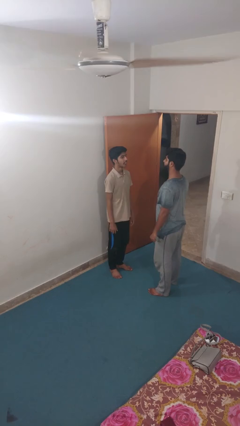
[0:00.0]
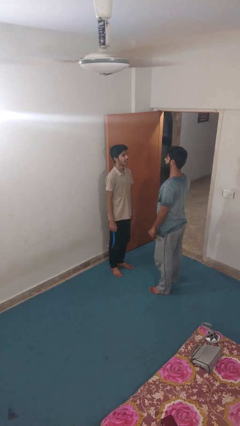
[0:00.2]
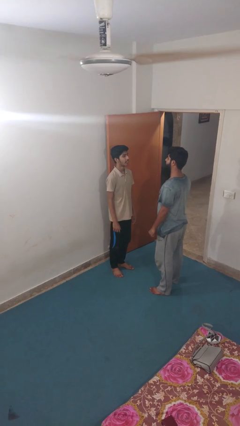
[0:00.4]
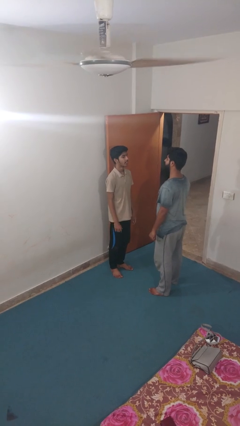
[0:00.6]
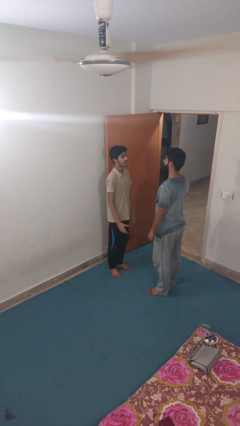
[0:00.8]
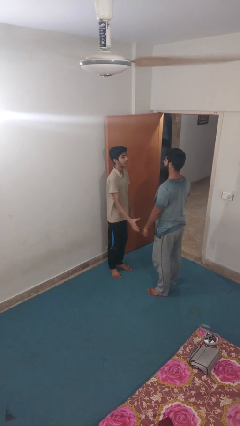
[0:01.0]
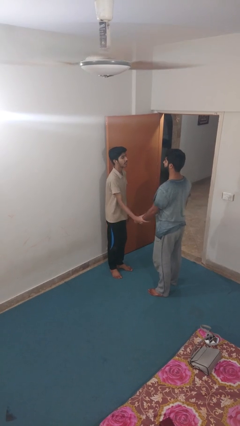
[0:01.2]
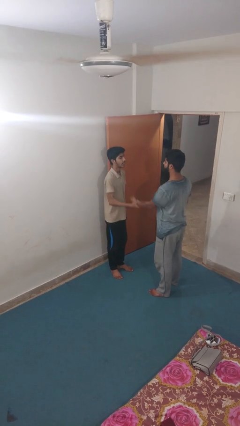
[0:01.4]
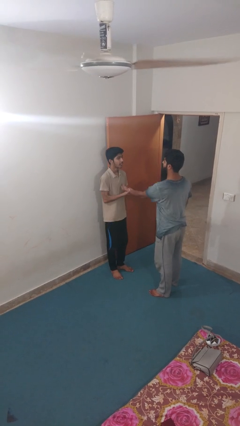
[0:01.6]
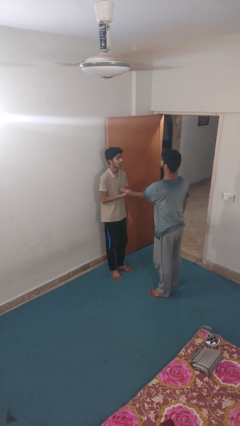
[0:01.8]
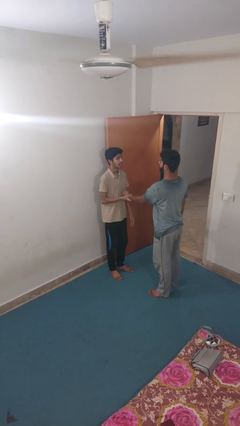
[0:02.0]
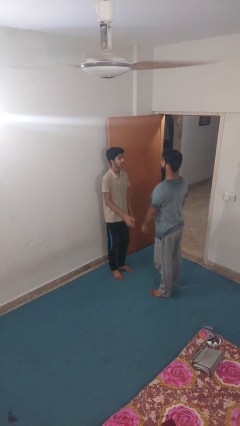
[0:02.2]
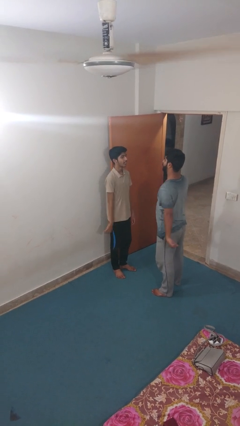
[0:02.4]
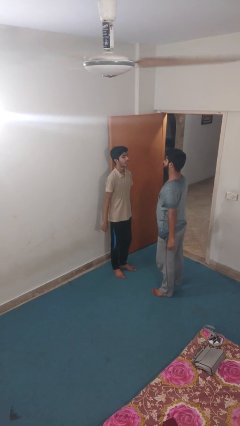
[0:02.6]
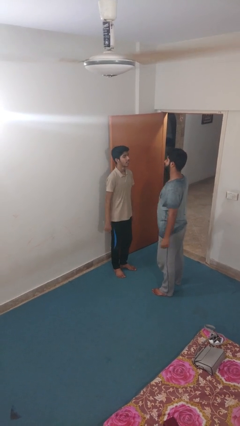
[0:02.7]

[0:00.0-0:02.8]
person grabs person by forearm

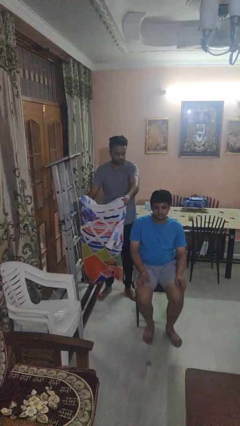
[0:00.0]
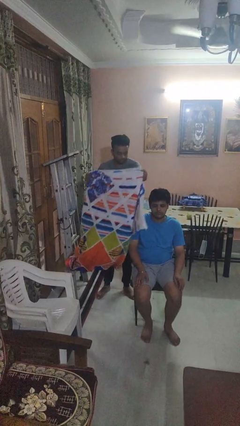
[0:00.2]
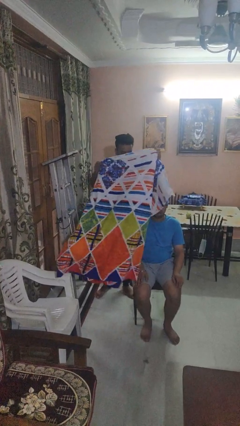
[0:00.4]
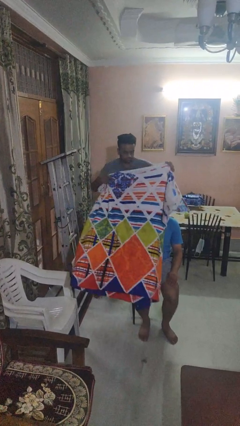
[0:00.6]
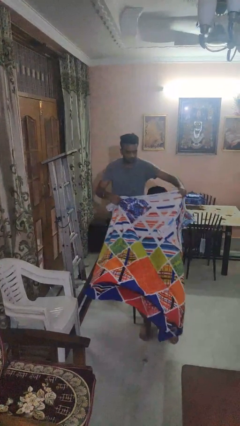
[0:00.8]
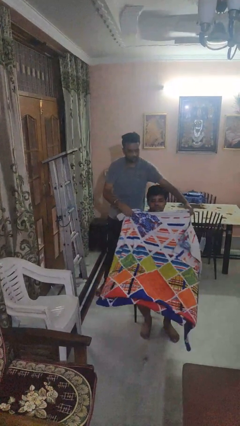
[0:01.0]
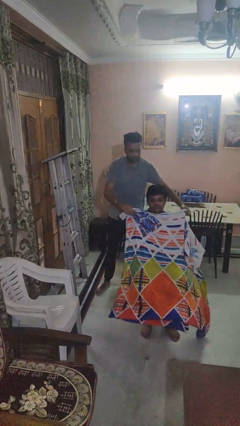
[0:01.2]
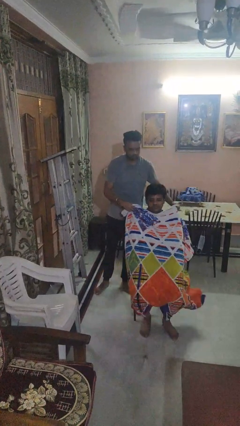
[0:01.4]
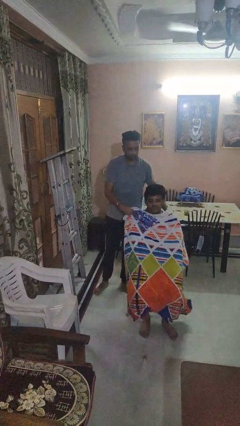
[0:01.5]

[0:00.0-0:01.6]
person covers friend with blanket

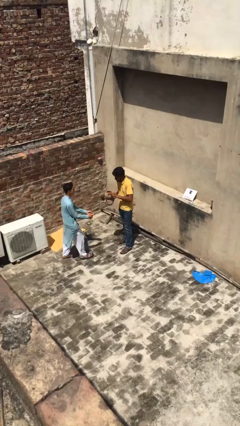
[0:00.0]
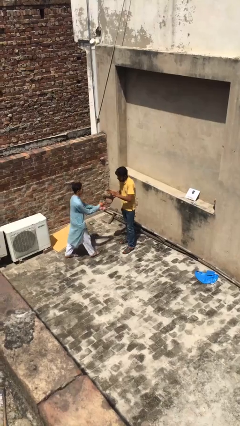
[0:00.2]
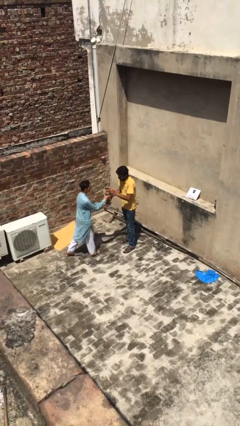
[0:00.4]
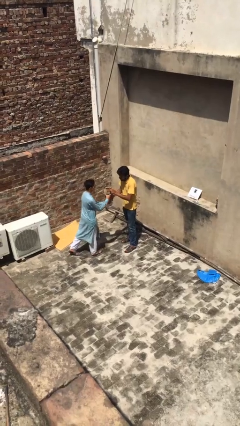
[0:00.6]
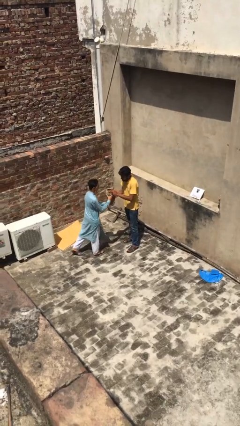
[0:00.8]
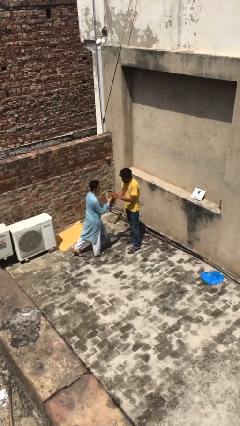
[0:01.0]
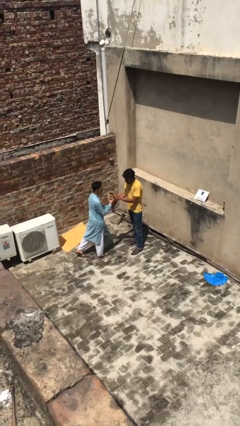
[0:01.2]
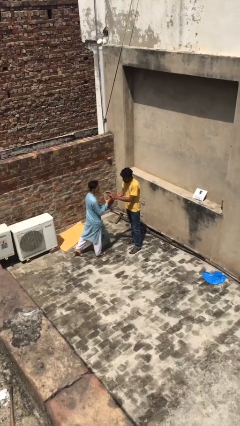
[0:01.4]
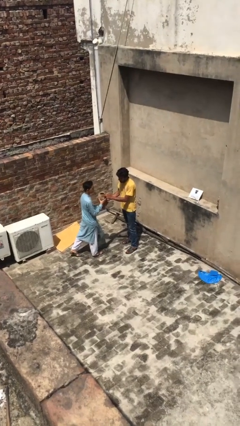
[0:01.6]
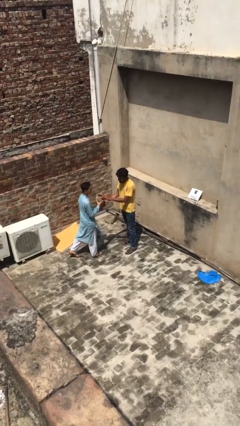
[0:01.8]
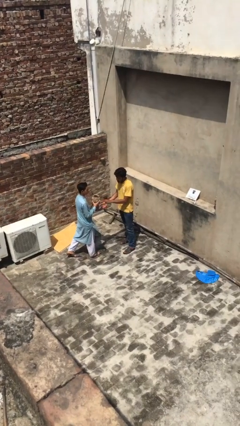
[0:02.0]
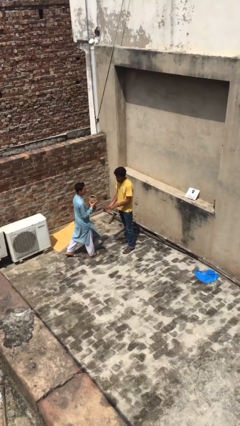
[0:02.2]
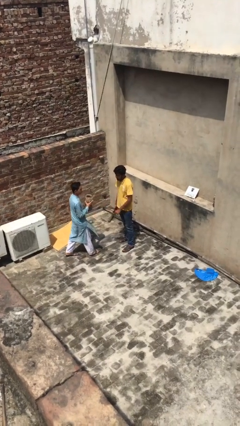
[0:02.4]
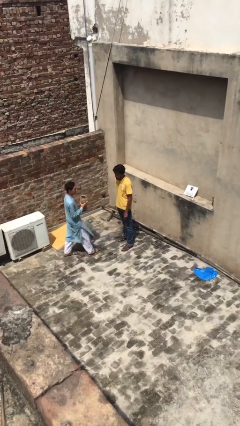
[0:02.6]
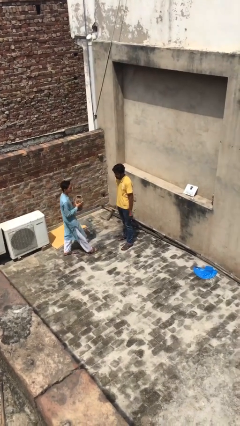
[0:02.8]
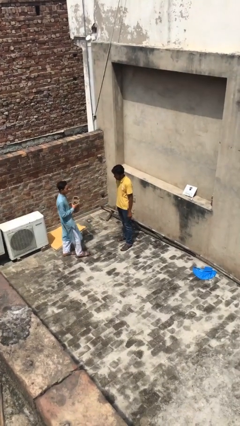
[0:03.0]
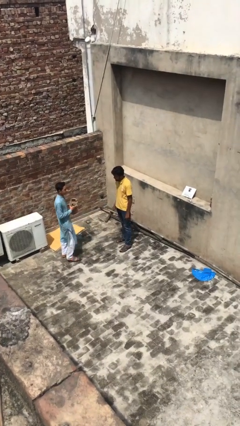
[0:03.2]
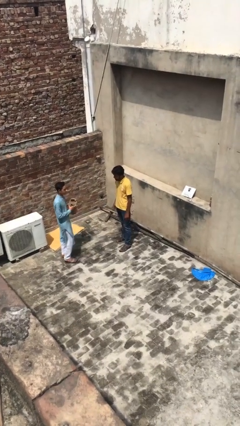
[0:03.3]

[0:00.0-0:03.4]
person transfers object to person

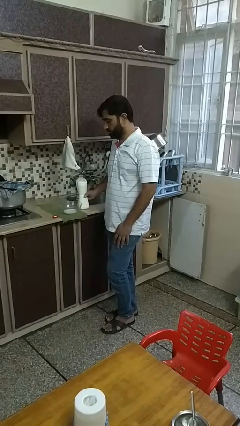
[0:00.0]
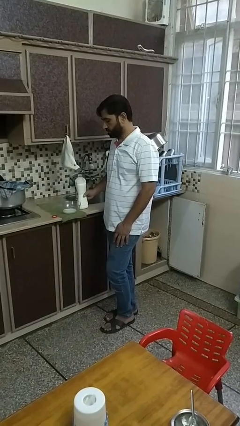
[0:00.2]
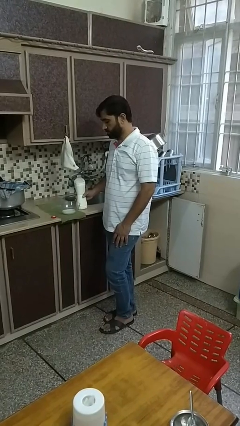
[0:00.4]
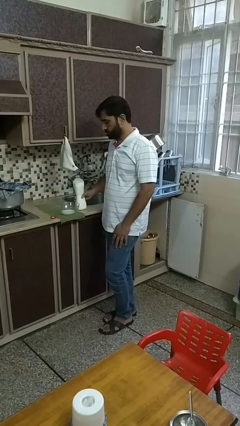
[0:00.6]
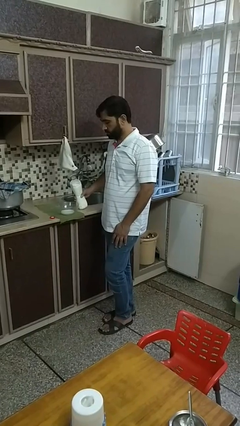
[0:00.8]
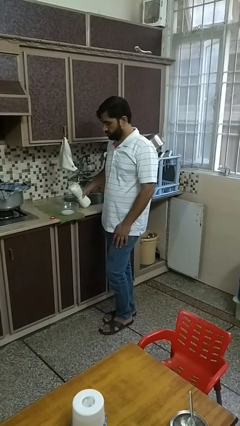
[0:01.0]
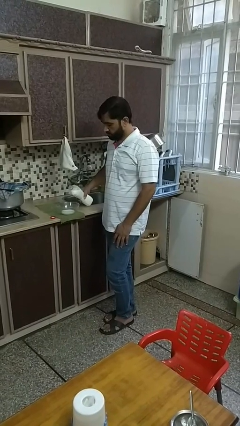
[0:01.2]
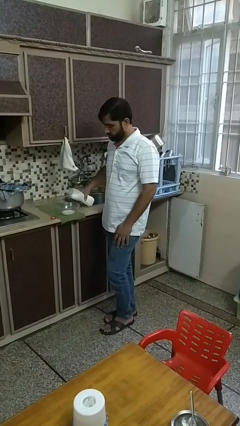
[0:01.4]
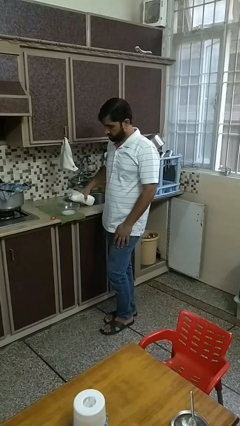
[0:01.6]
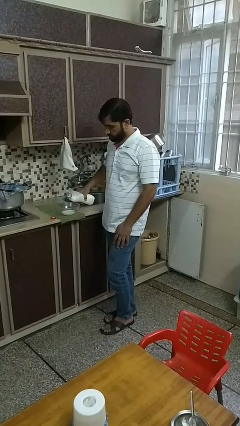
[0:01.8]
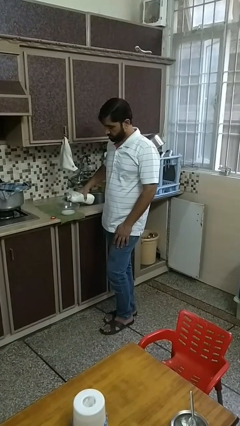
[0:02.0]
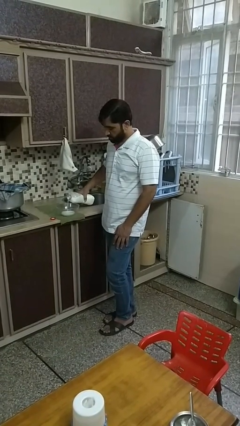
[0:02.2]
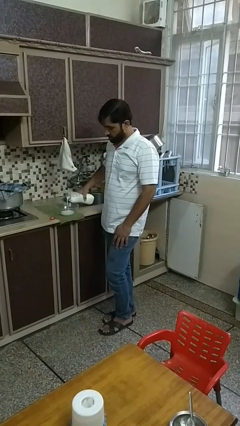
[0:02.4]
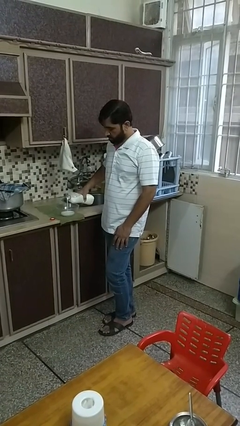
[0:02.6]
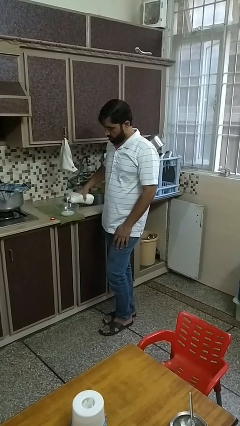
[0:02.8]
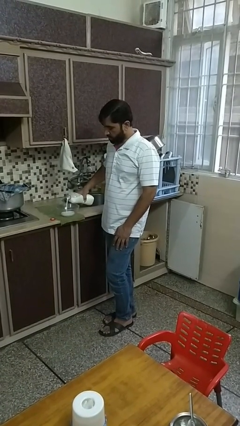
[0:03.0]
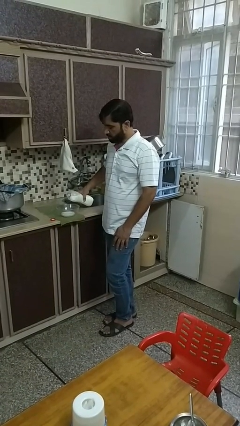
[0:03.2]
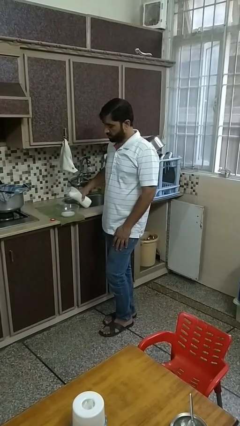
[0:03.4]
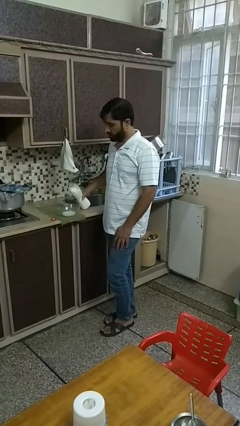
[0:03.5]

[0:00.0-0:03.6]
person pours into bowl

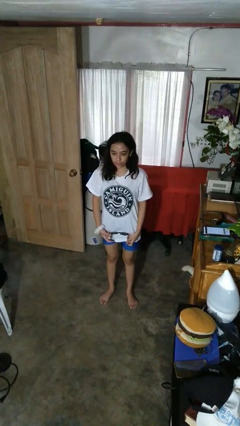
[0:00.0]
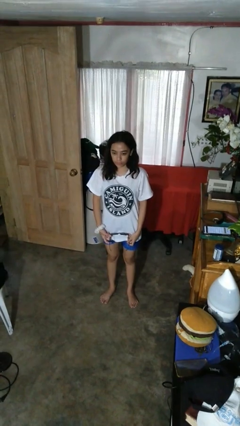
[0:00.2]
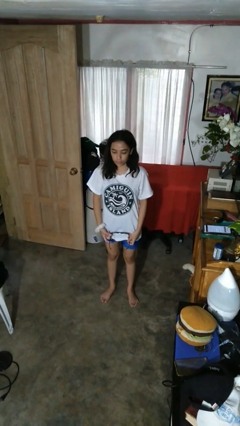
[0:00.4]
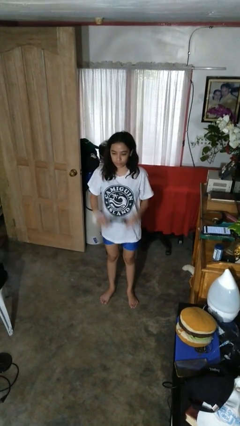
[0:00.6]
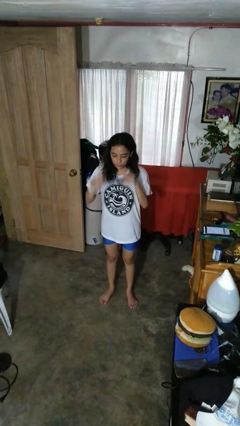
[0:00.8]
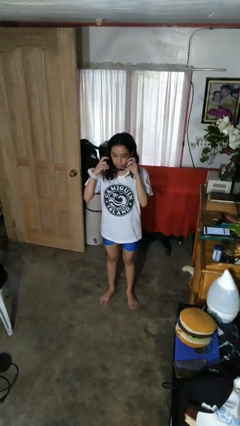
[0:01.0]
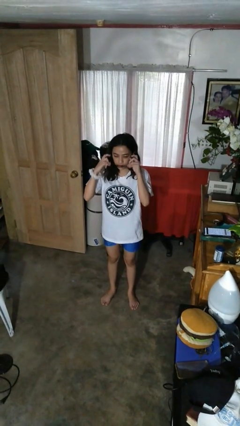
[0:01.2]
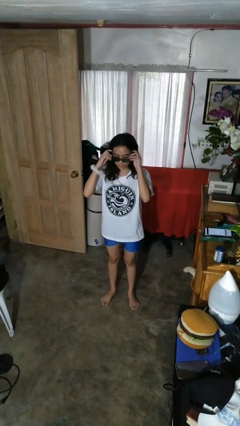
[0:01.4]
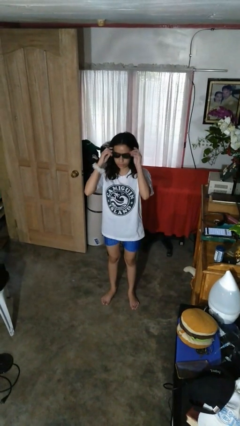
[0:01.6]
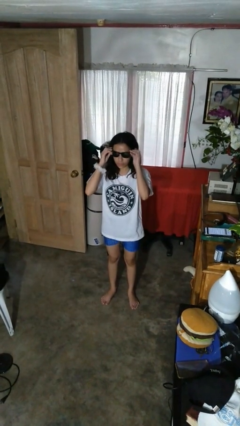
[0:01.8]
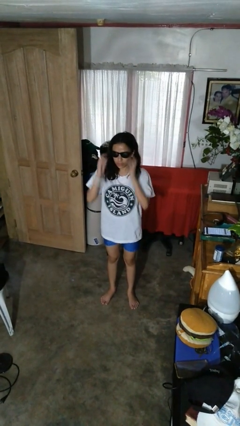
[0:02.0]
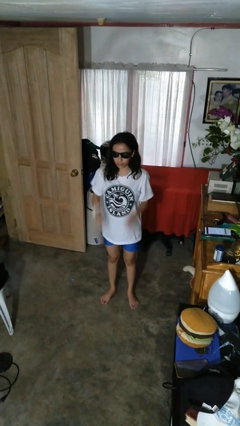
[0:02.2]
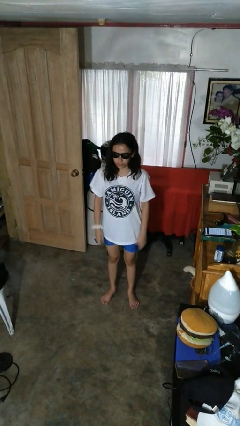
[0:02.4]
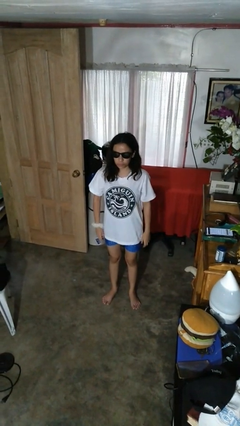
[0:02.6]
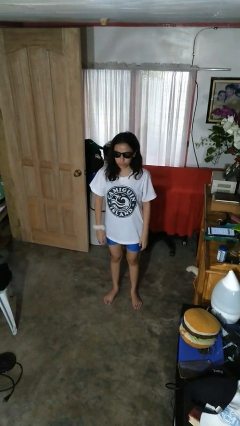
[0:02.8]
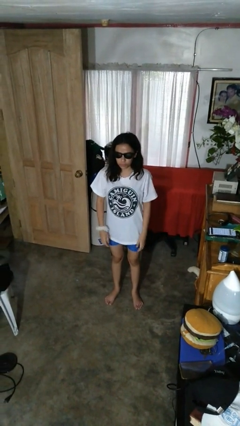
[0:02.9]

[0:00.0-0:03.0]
person puts on sunglasses

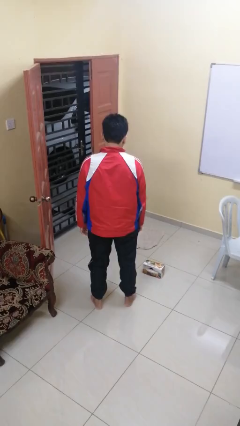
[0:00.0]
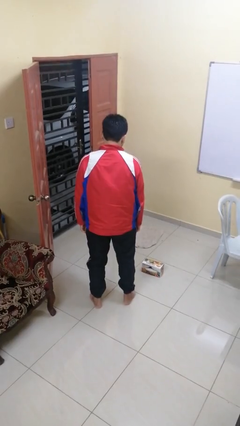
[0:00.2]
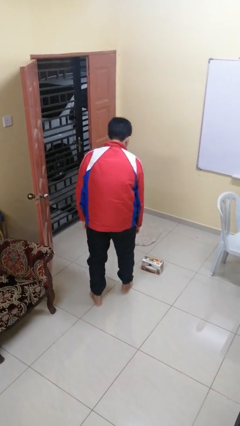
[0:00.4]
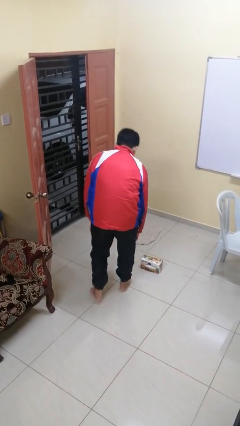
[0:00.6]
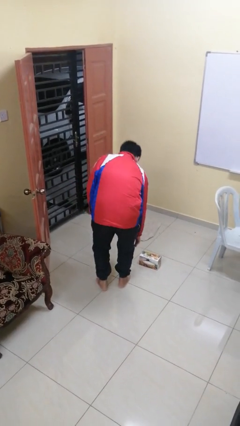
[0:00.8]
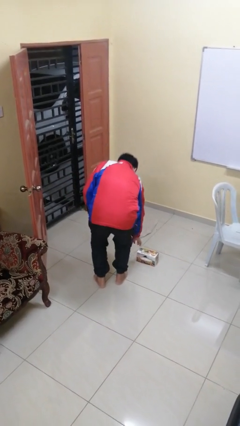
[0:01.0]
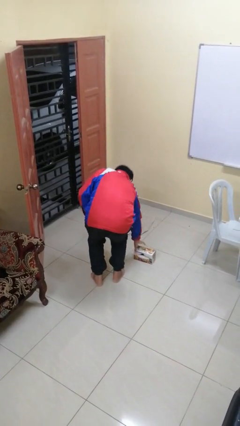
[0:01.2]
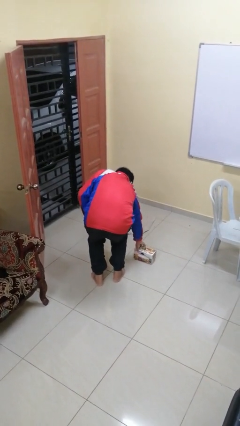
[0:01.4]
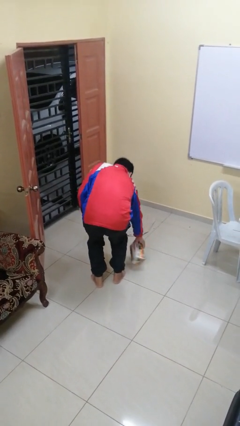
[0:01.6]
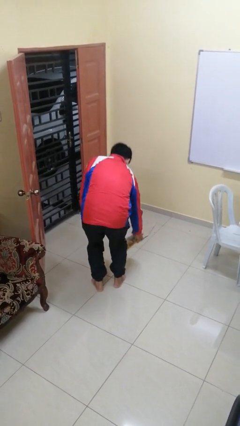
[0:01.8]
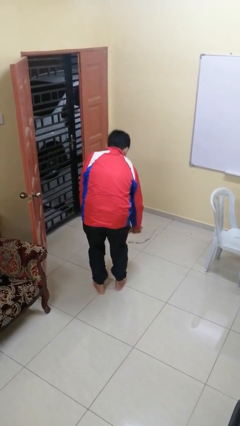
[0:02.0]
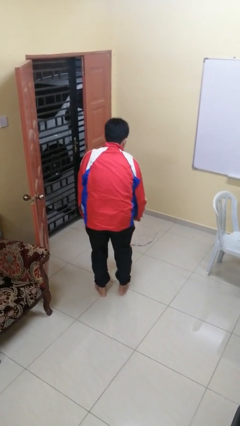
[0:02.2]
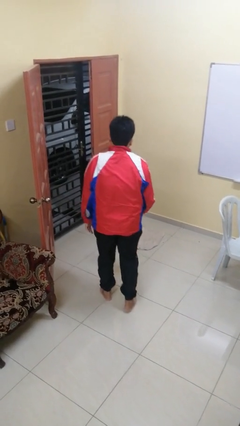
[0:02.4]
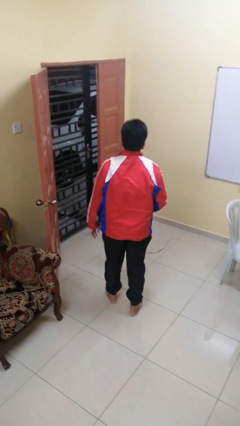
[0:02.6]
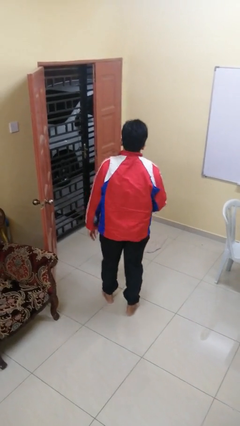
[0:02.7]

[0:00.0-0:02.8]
person picks up object from floor
